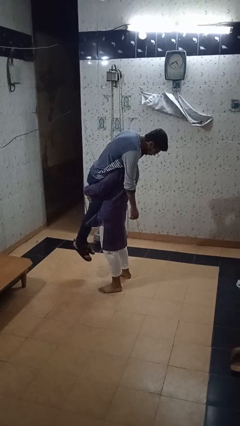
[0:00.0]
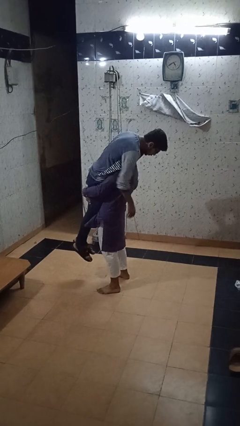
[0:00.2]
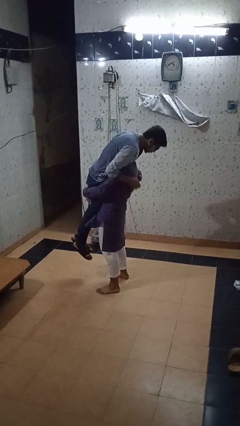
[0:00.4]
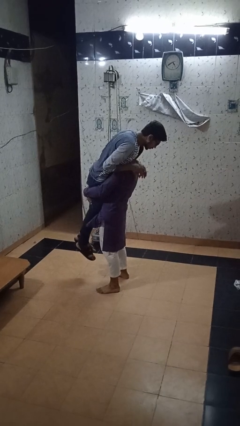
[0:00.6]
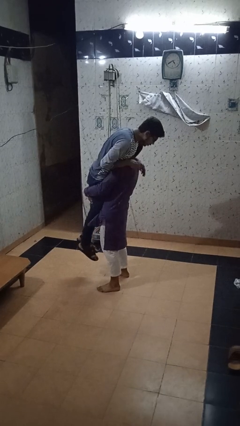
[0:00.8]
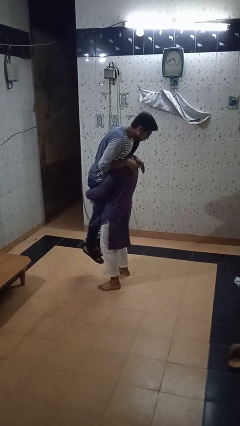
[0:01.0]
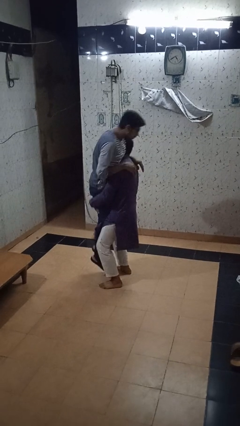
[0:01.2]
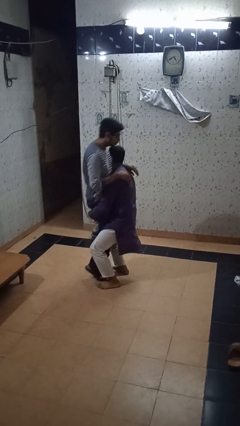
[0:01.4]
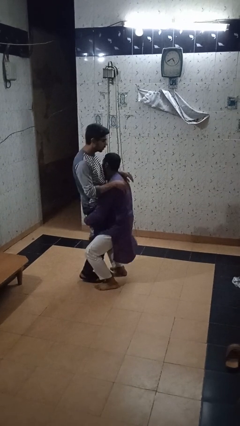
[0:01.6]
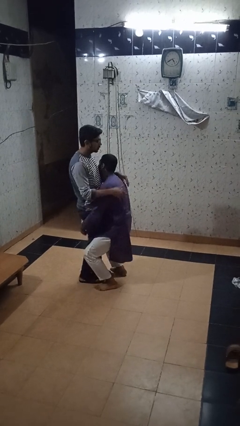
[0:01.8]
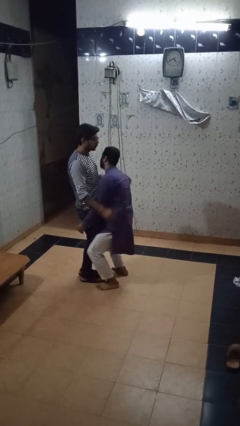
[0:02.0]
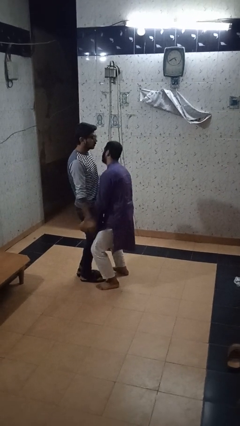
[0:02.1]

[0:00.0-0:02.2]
person puts down person

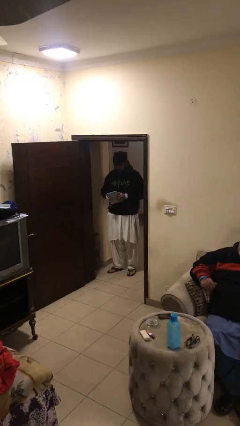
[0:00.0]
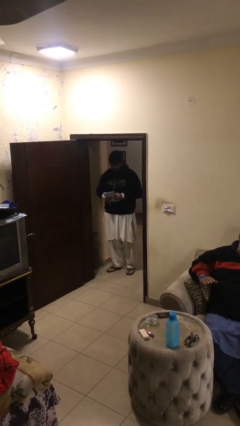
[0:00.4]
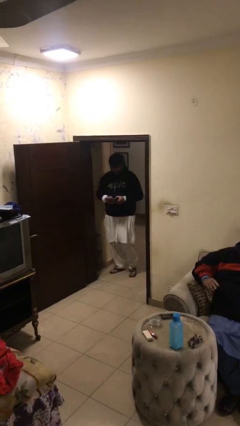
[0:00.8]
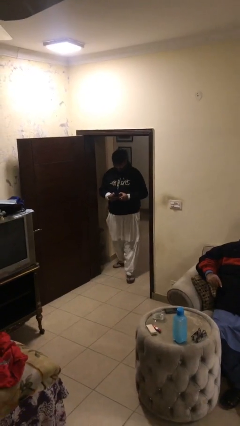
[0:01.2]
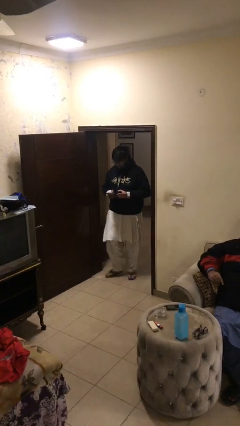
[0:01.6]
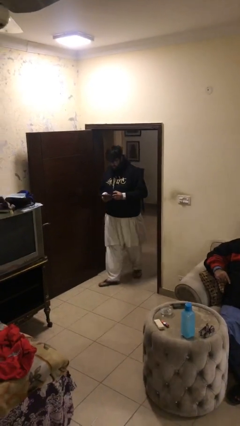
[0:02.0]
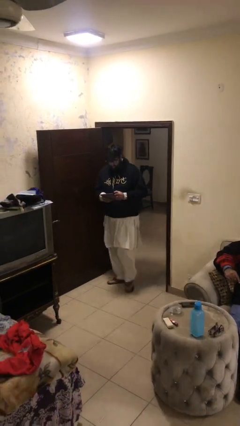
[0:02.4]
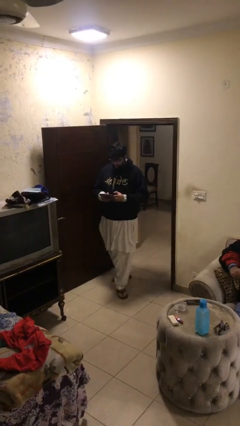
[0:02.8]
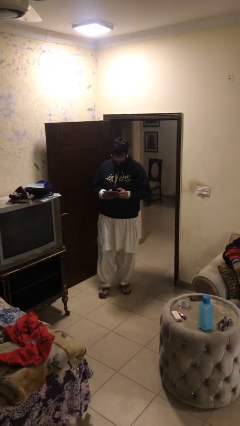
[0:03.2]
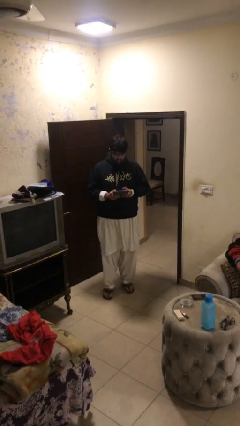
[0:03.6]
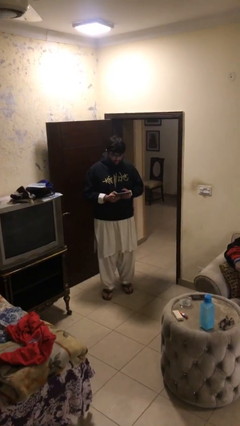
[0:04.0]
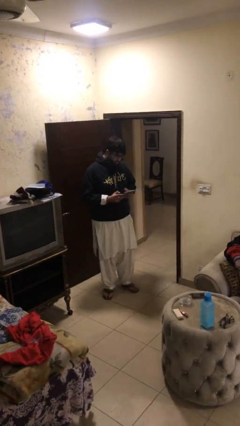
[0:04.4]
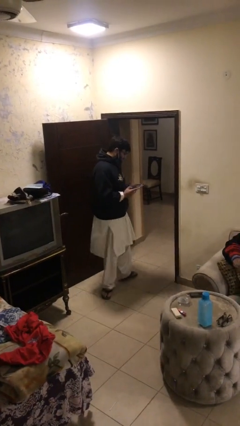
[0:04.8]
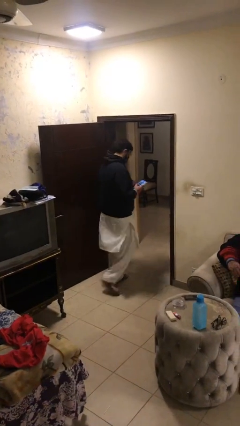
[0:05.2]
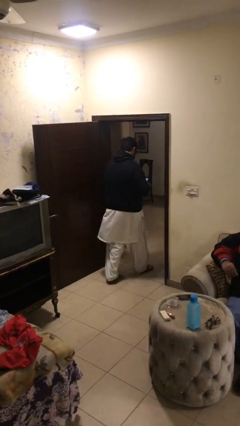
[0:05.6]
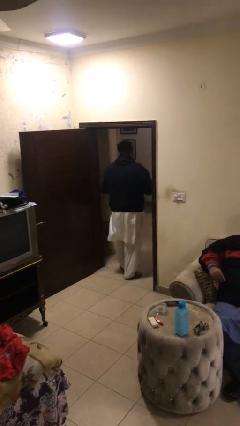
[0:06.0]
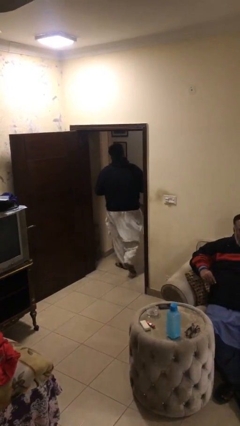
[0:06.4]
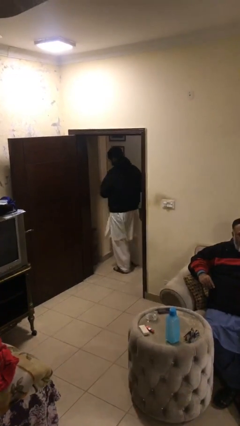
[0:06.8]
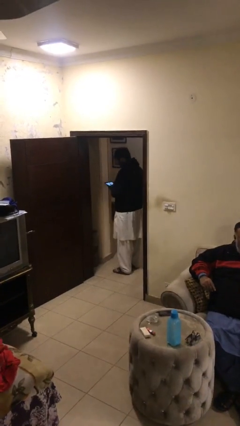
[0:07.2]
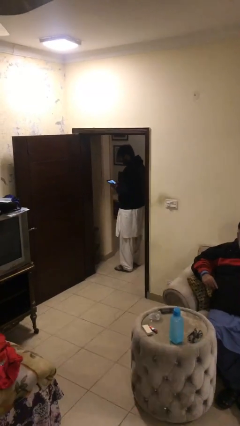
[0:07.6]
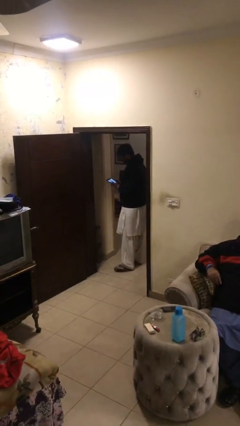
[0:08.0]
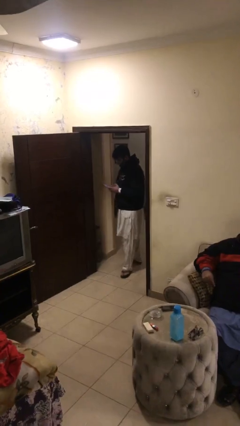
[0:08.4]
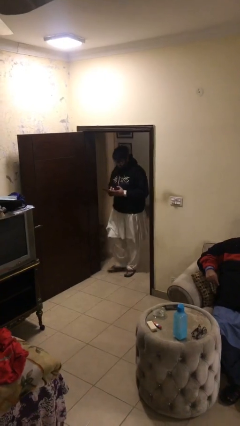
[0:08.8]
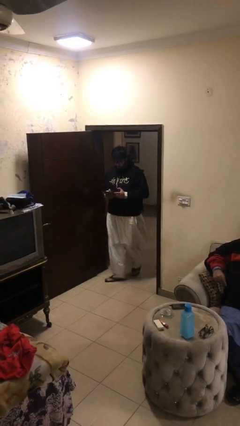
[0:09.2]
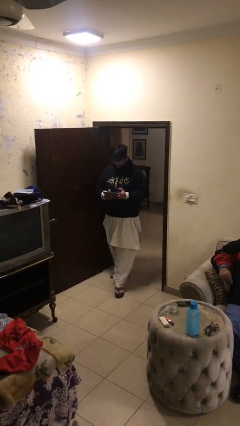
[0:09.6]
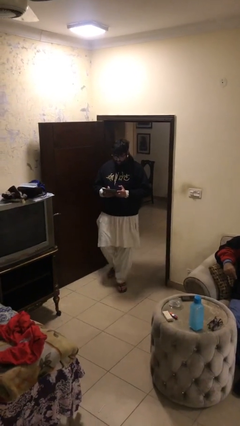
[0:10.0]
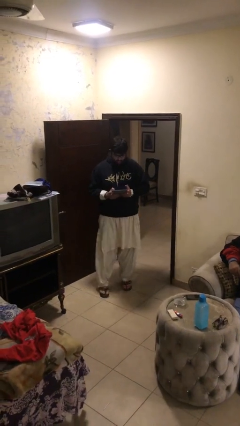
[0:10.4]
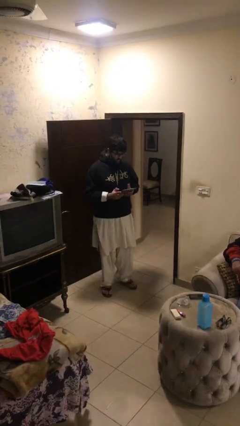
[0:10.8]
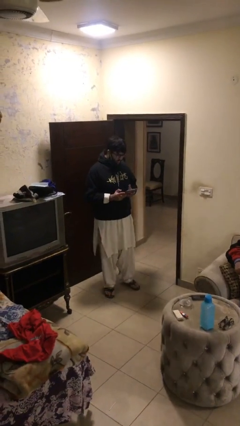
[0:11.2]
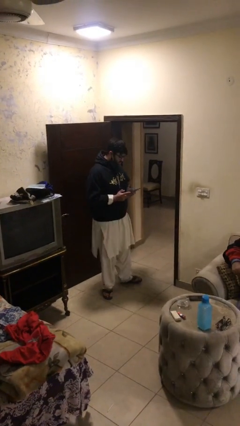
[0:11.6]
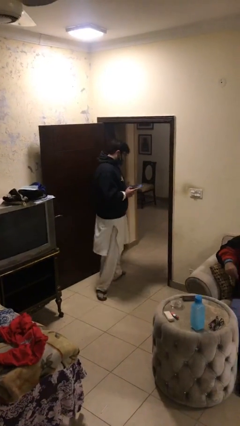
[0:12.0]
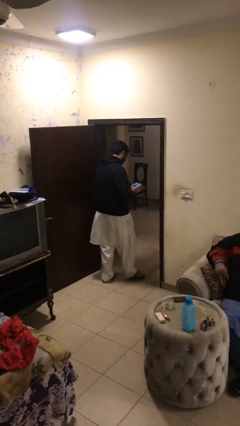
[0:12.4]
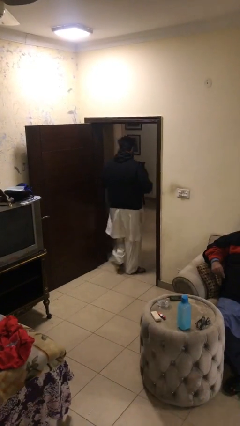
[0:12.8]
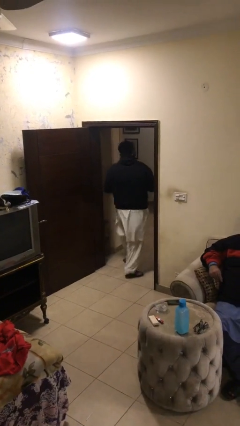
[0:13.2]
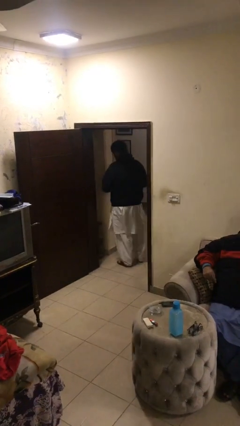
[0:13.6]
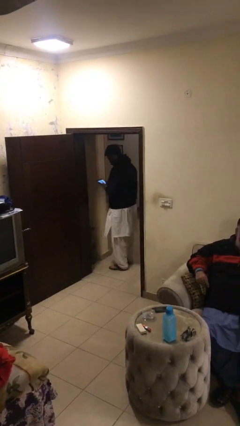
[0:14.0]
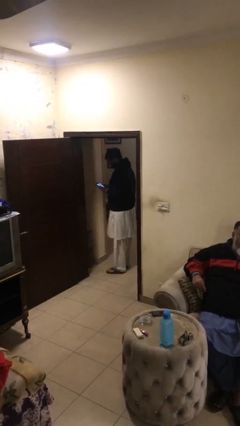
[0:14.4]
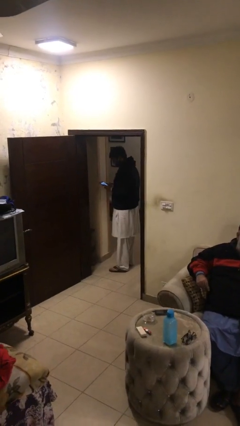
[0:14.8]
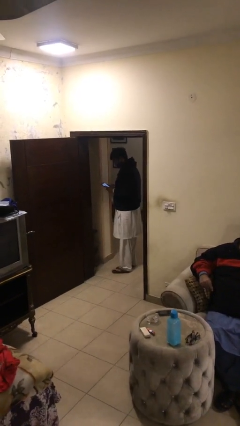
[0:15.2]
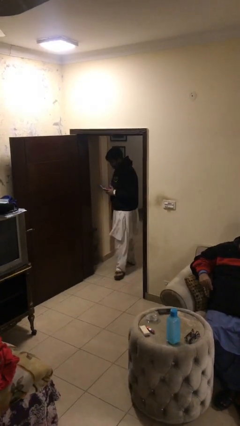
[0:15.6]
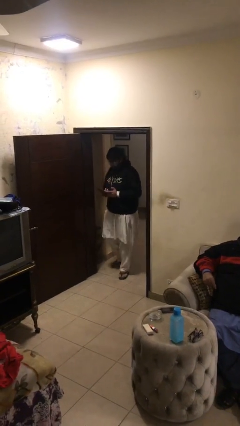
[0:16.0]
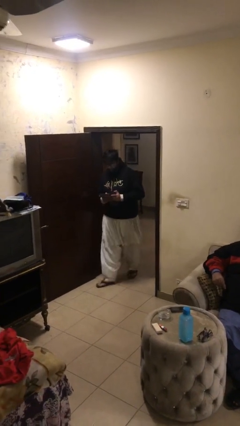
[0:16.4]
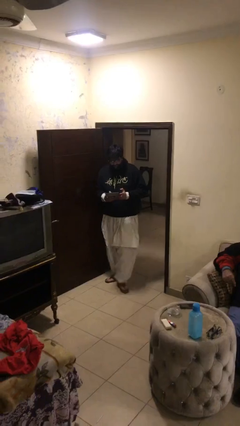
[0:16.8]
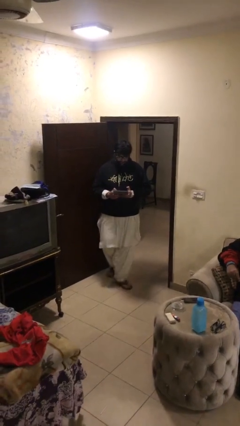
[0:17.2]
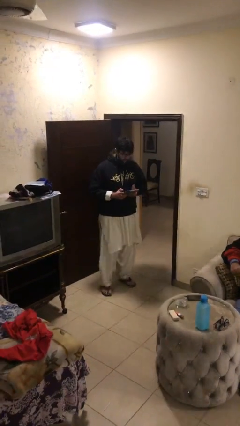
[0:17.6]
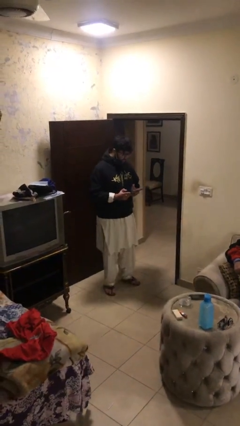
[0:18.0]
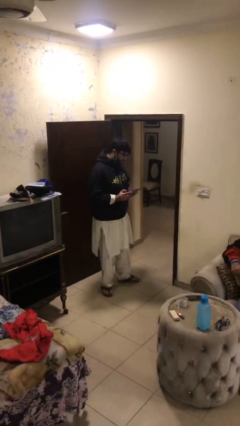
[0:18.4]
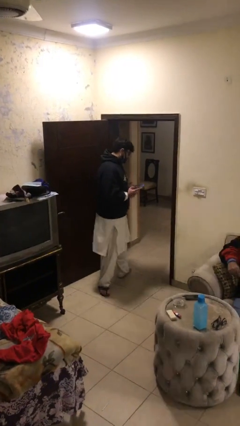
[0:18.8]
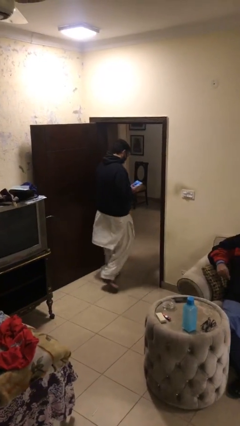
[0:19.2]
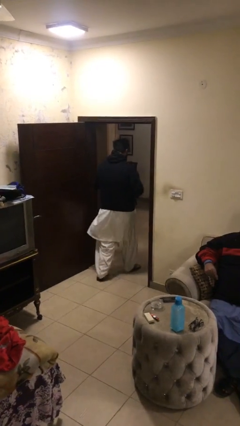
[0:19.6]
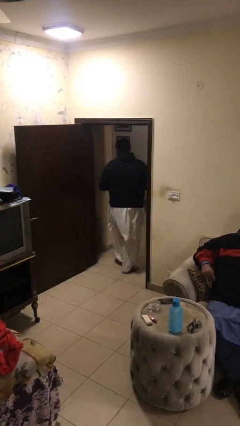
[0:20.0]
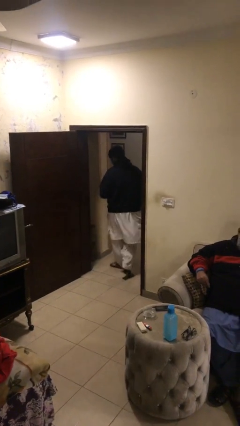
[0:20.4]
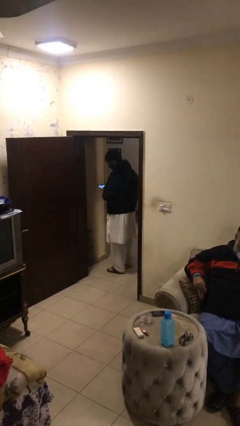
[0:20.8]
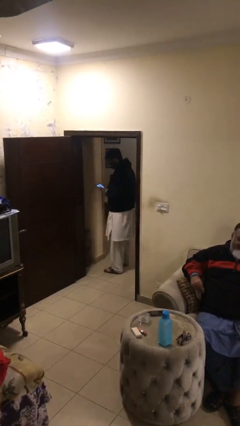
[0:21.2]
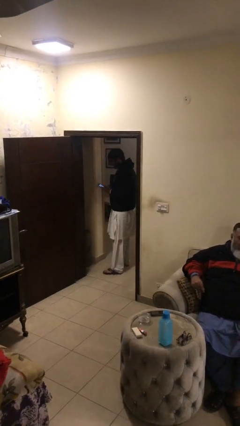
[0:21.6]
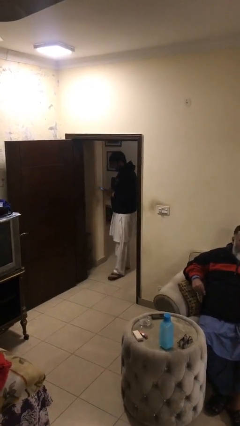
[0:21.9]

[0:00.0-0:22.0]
person texts on phone

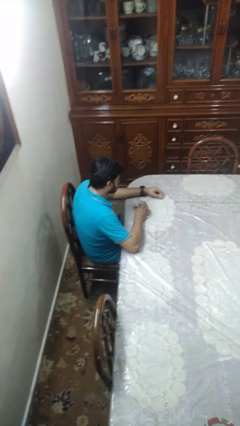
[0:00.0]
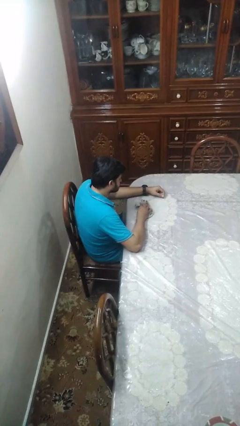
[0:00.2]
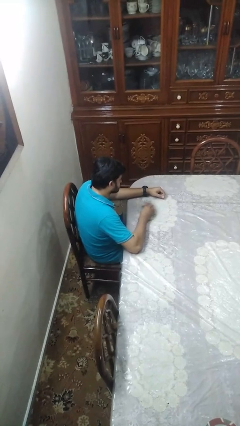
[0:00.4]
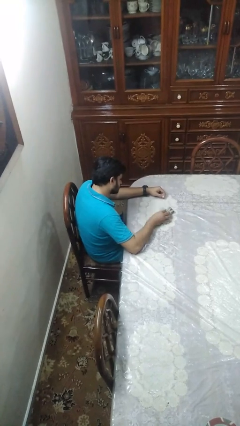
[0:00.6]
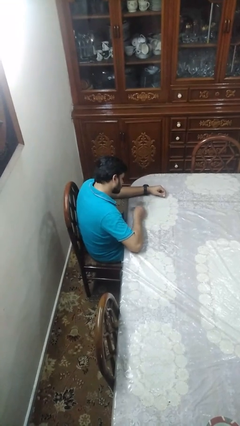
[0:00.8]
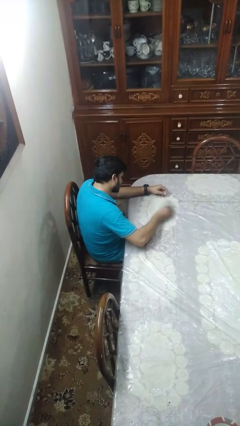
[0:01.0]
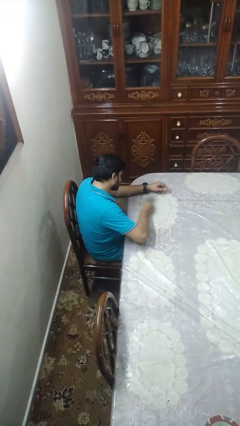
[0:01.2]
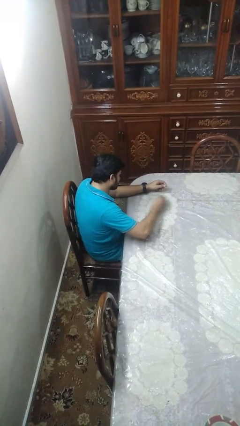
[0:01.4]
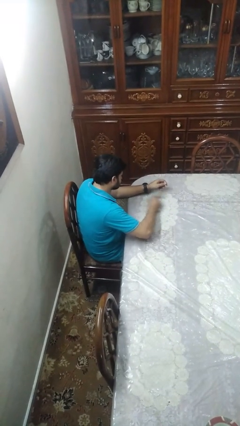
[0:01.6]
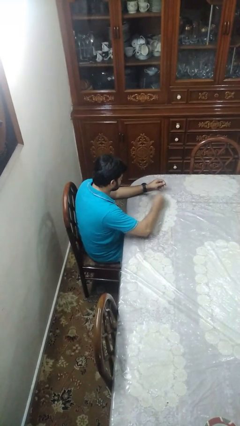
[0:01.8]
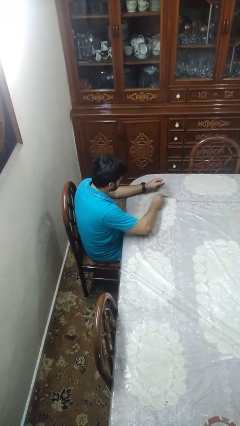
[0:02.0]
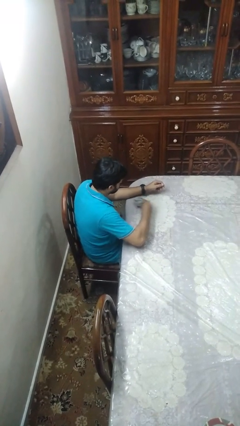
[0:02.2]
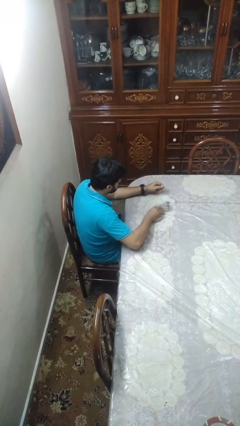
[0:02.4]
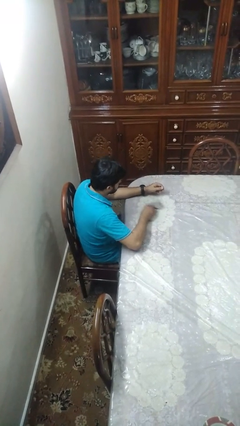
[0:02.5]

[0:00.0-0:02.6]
person cleans table with rag

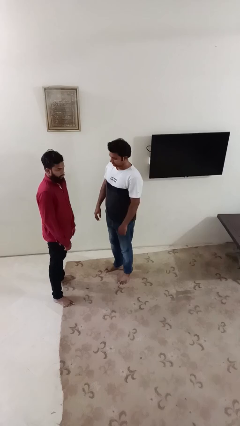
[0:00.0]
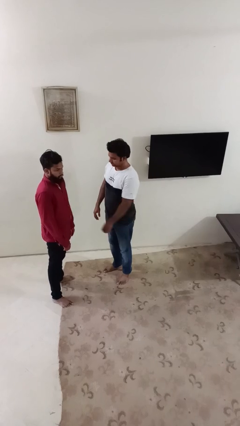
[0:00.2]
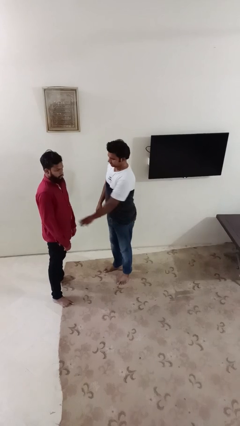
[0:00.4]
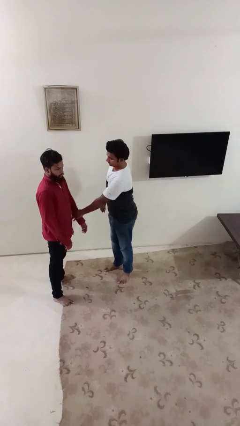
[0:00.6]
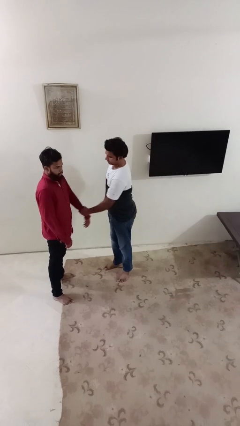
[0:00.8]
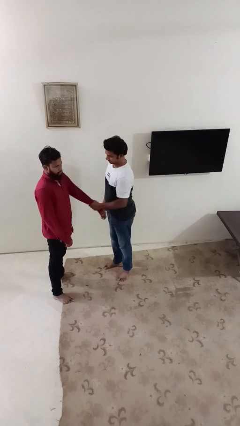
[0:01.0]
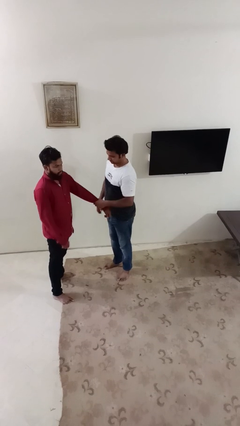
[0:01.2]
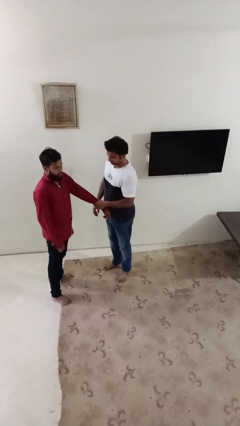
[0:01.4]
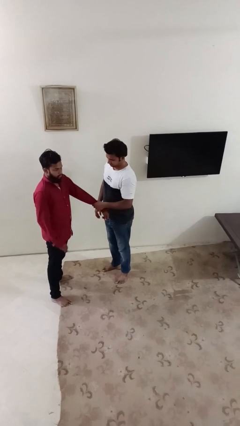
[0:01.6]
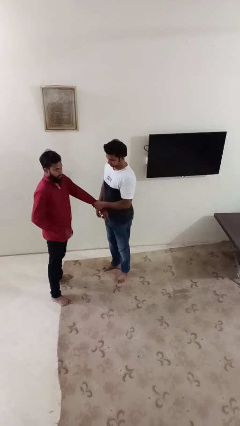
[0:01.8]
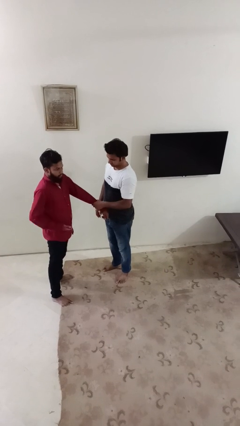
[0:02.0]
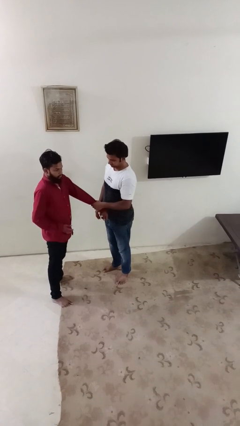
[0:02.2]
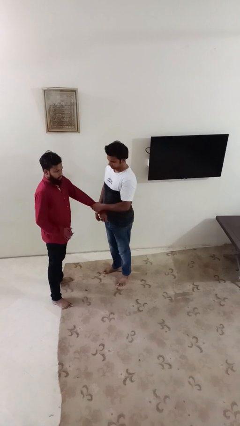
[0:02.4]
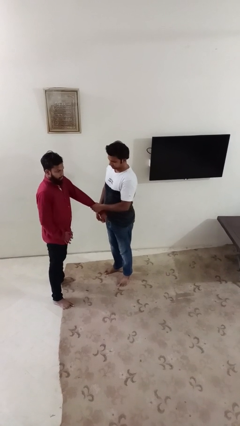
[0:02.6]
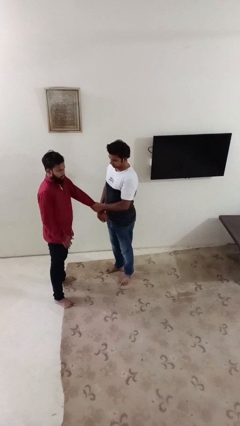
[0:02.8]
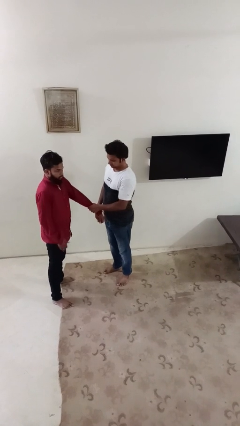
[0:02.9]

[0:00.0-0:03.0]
person grabs person by forearm
